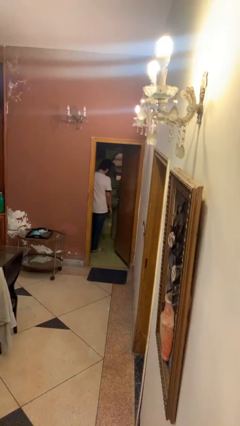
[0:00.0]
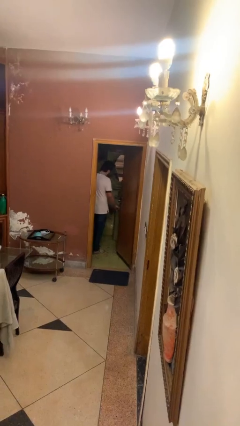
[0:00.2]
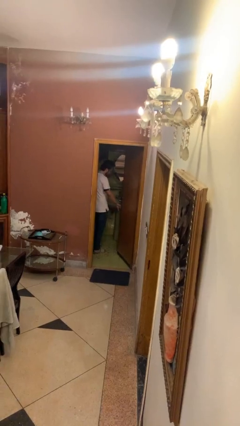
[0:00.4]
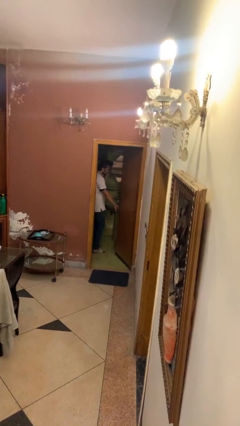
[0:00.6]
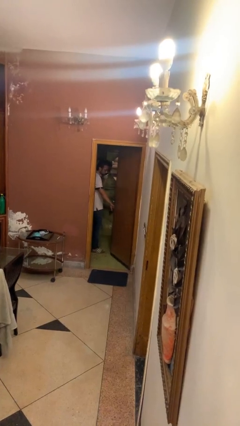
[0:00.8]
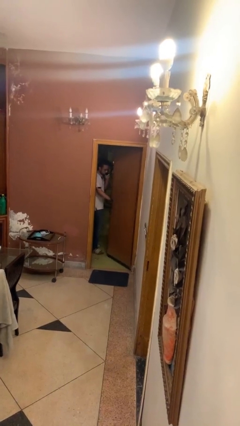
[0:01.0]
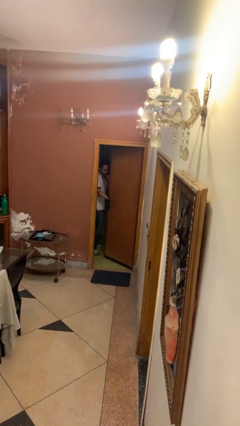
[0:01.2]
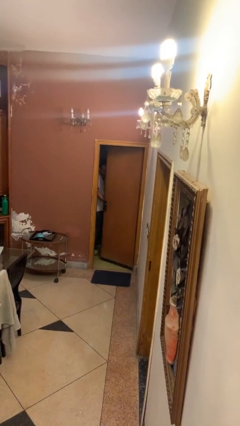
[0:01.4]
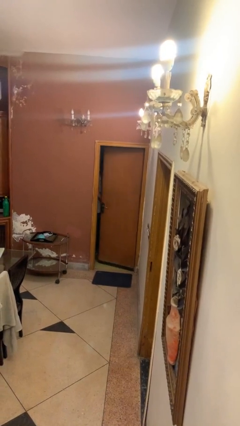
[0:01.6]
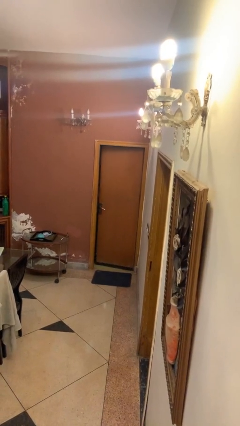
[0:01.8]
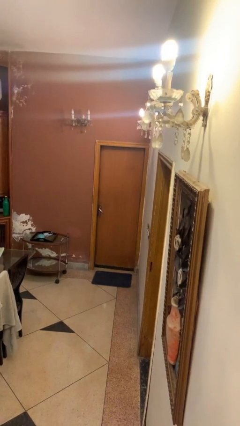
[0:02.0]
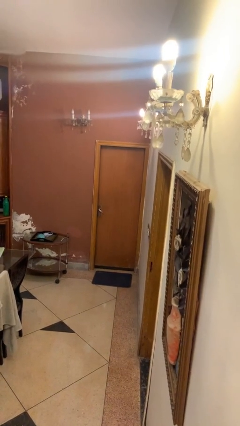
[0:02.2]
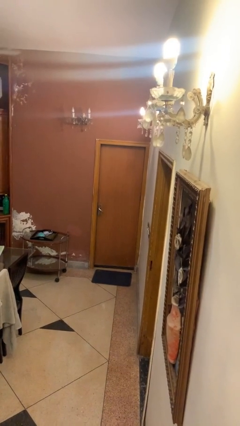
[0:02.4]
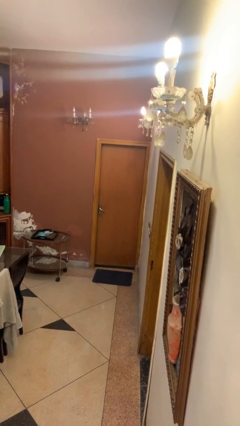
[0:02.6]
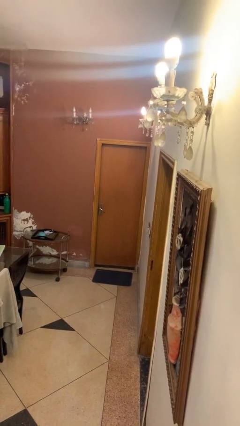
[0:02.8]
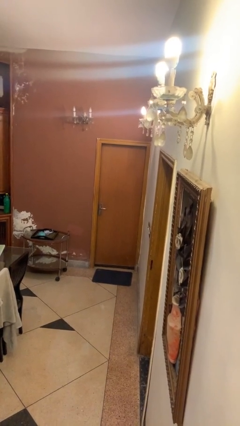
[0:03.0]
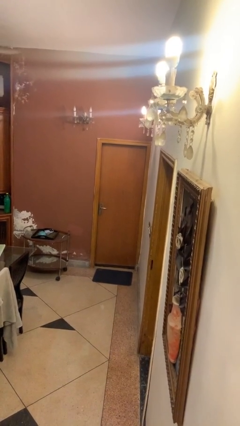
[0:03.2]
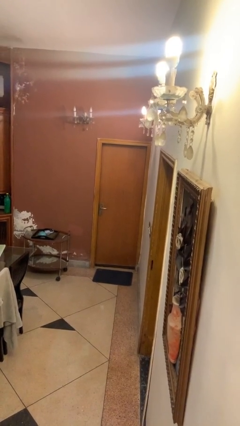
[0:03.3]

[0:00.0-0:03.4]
person closes facility door

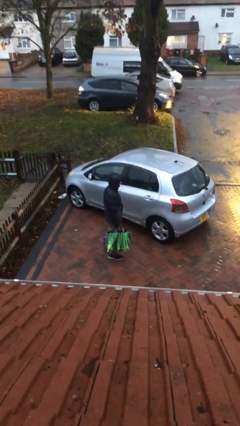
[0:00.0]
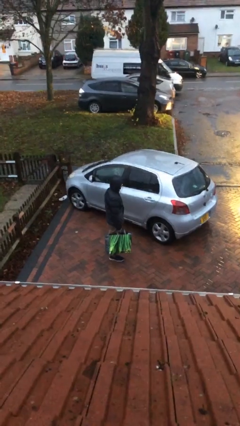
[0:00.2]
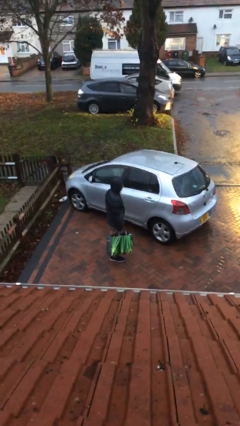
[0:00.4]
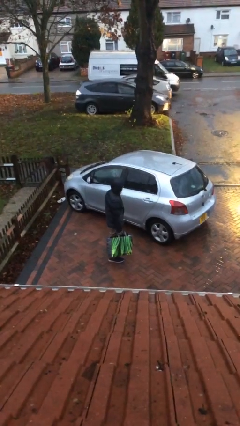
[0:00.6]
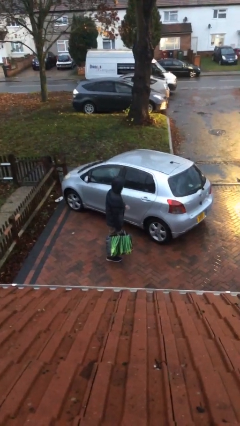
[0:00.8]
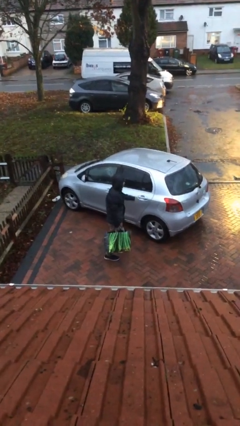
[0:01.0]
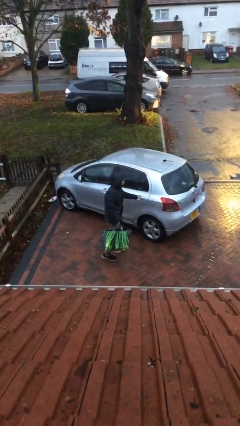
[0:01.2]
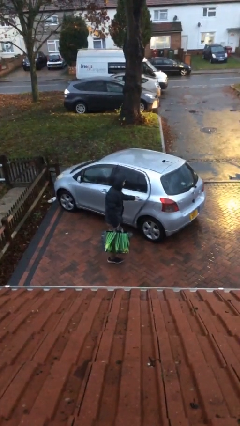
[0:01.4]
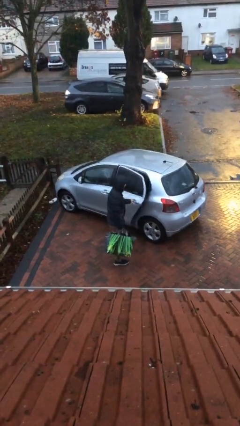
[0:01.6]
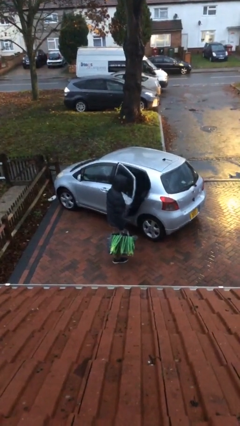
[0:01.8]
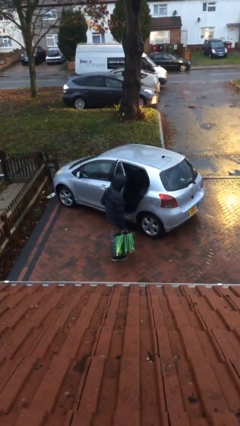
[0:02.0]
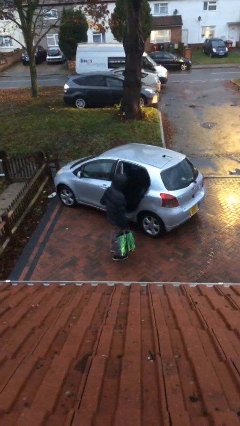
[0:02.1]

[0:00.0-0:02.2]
person opens car door

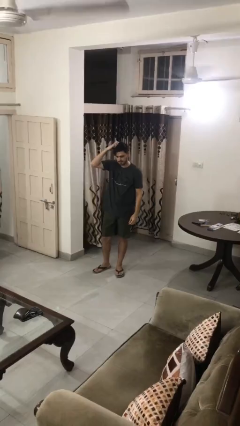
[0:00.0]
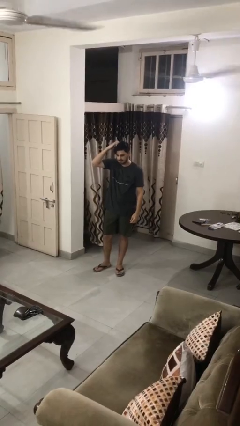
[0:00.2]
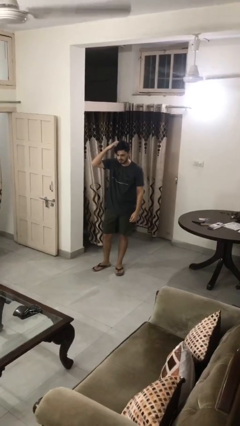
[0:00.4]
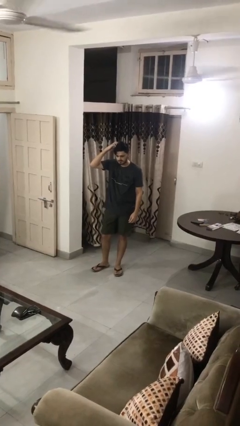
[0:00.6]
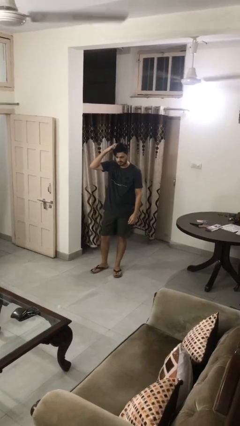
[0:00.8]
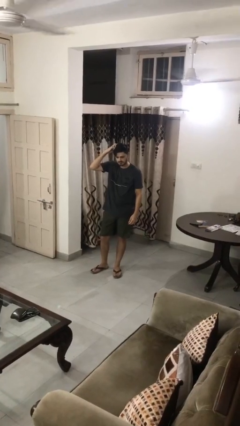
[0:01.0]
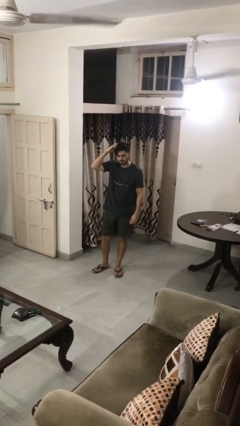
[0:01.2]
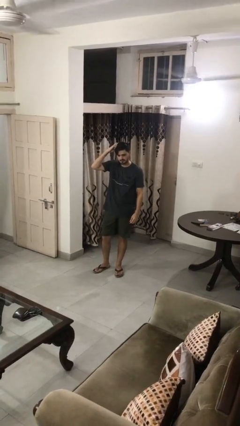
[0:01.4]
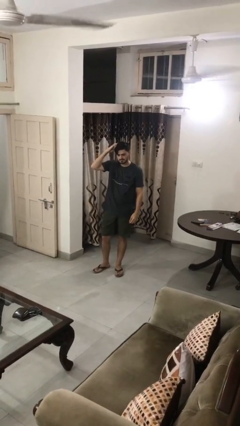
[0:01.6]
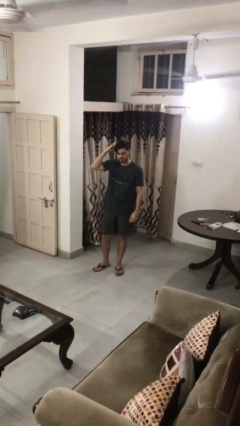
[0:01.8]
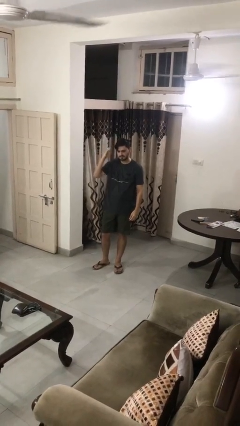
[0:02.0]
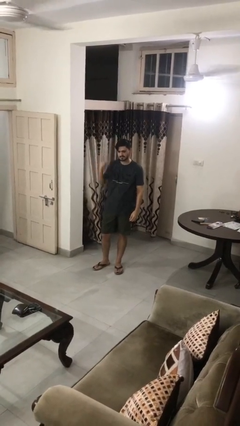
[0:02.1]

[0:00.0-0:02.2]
person scratches face

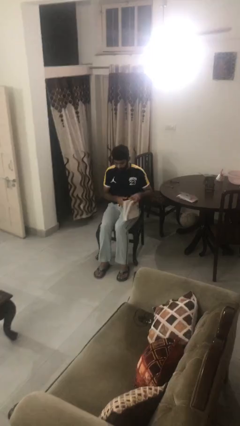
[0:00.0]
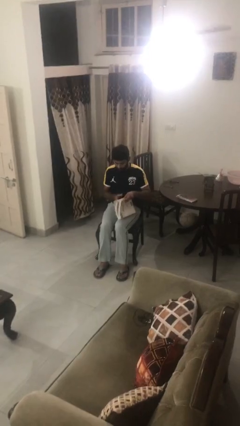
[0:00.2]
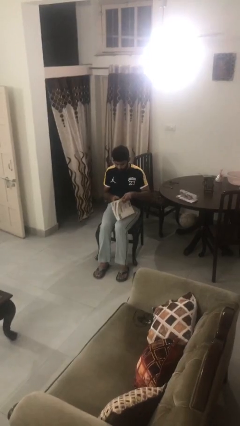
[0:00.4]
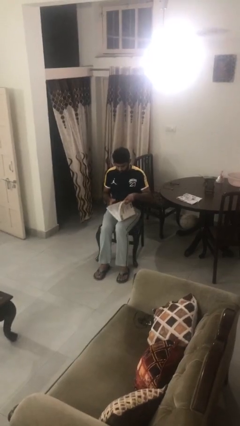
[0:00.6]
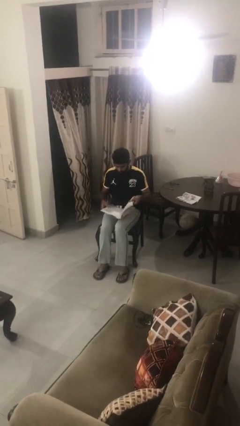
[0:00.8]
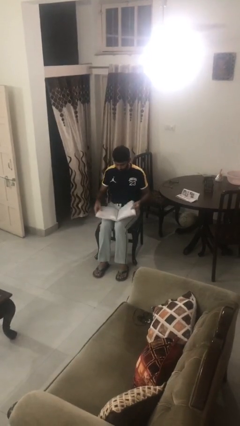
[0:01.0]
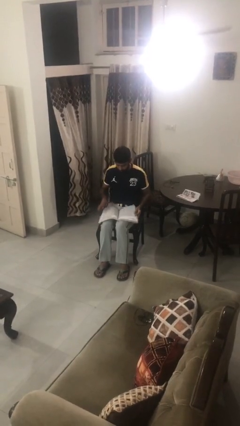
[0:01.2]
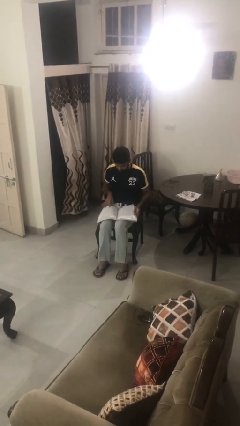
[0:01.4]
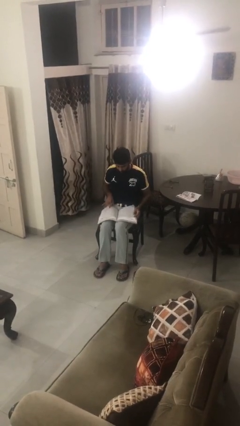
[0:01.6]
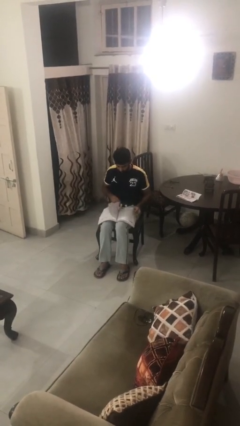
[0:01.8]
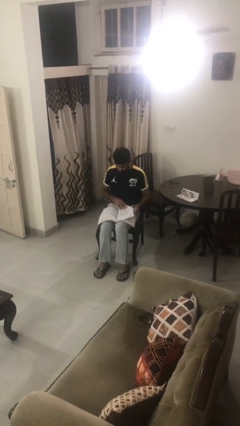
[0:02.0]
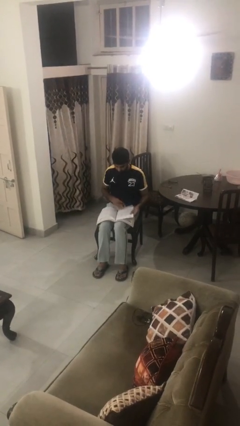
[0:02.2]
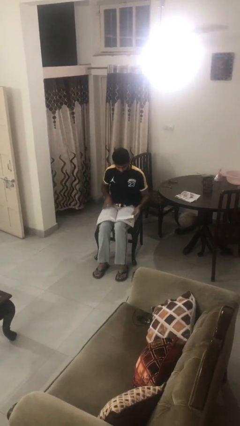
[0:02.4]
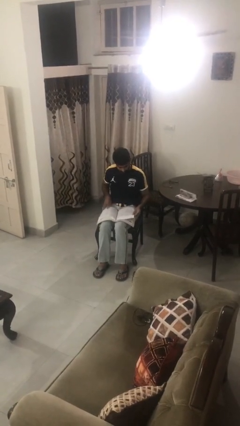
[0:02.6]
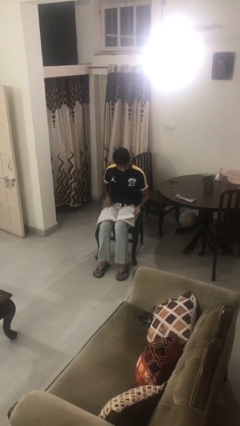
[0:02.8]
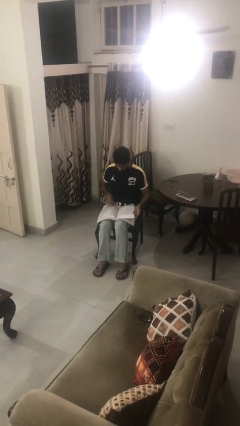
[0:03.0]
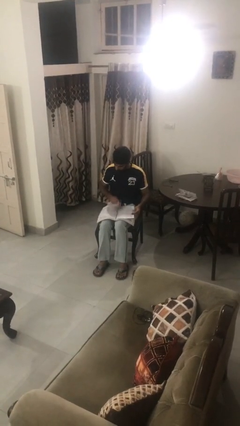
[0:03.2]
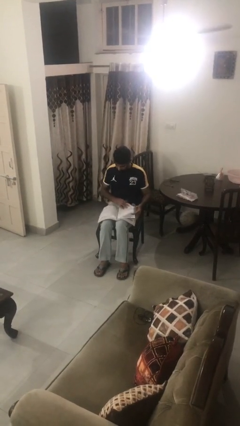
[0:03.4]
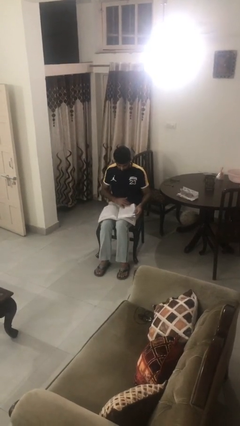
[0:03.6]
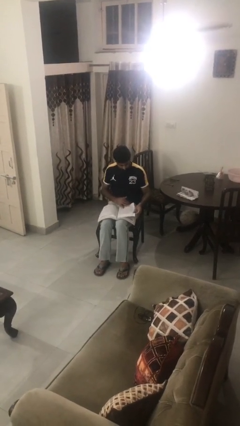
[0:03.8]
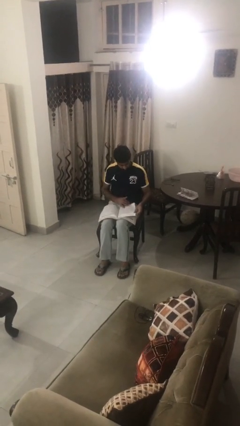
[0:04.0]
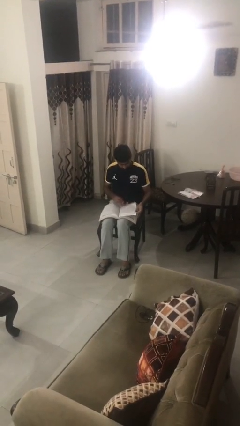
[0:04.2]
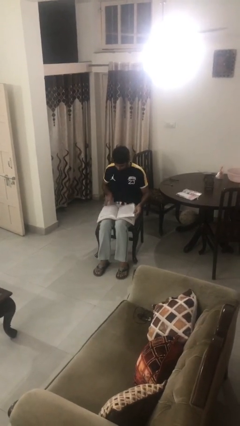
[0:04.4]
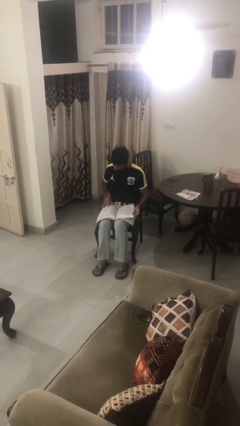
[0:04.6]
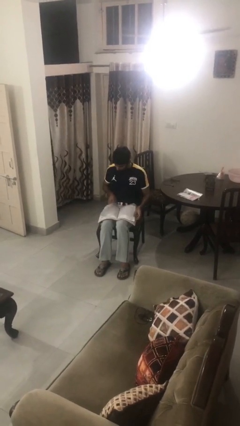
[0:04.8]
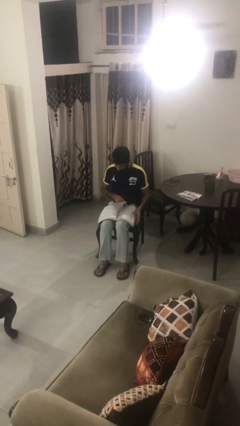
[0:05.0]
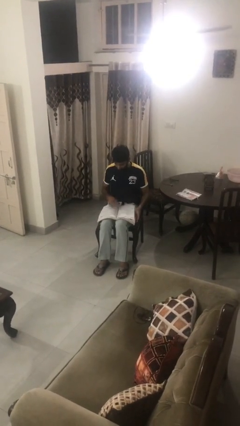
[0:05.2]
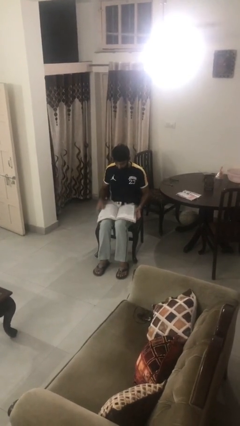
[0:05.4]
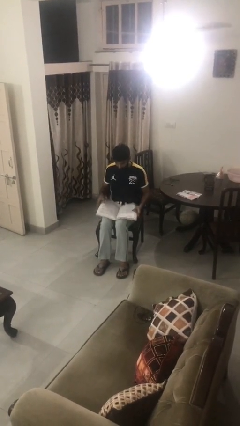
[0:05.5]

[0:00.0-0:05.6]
person reads book

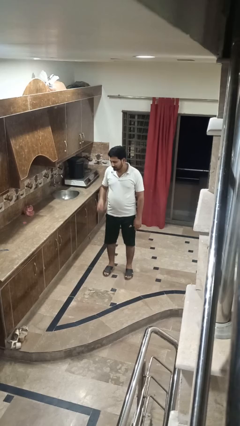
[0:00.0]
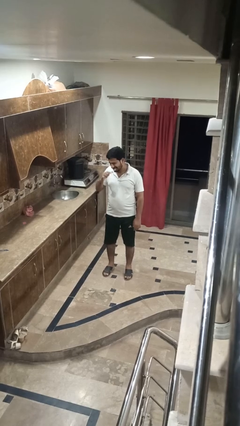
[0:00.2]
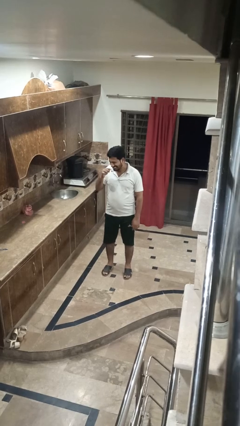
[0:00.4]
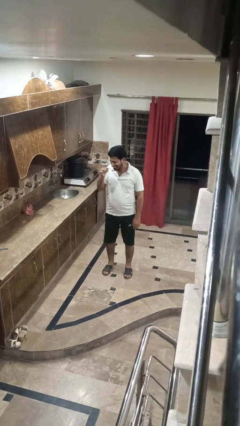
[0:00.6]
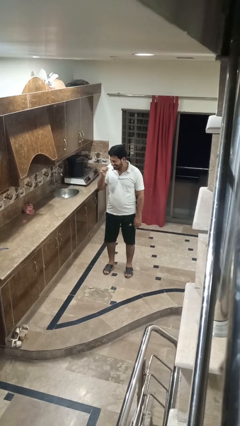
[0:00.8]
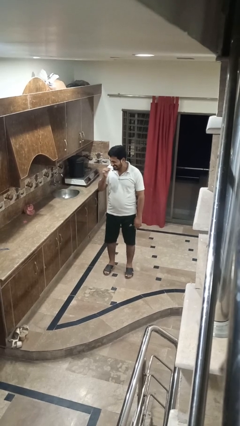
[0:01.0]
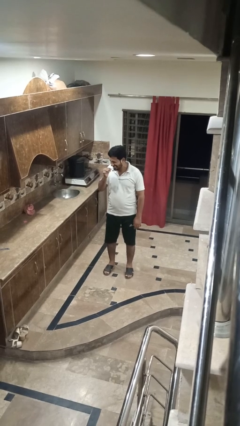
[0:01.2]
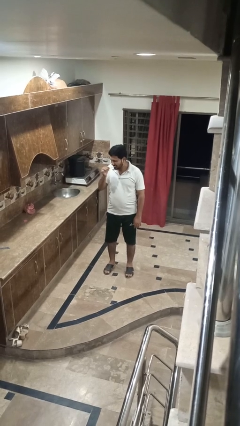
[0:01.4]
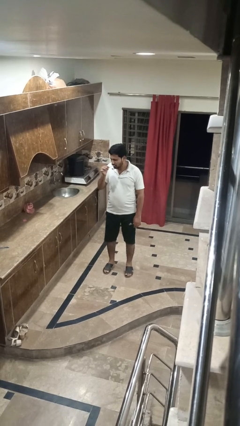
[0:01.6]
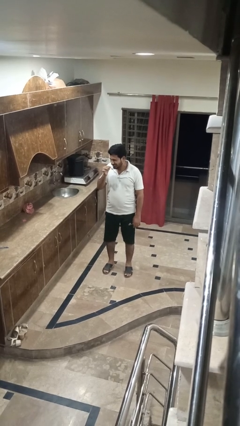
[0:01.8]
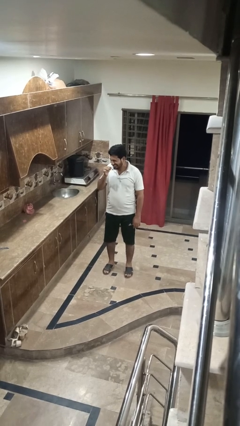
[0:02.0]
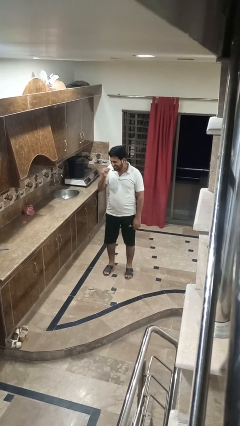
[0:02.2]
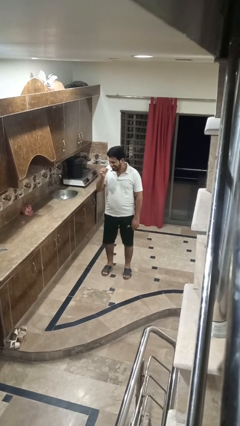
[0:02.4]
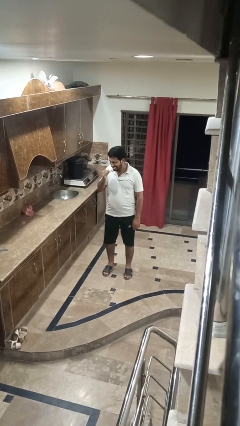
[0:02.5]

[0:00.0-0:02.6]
person brushes teeth

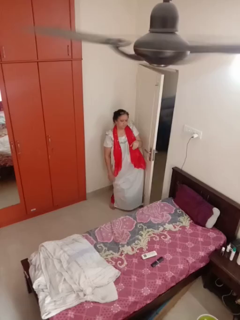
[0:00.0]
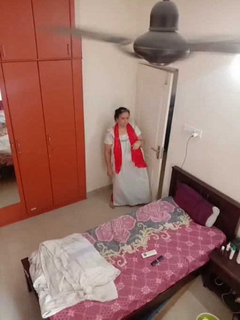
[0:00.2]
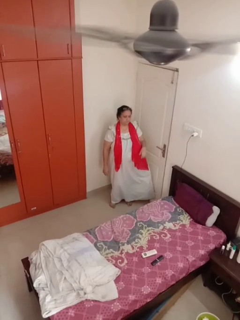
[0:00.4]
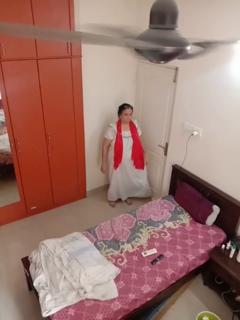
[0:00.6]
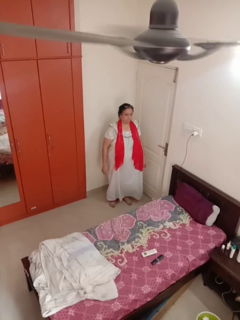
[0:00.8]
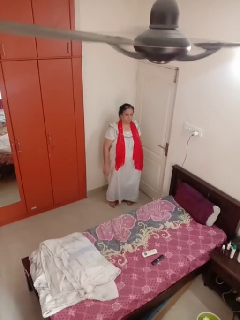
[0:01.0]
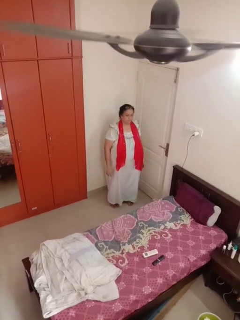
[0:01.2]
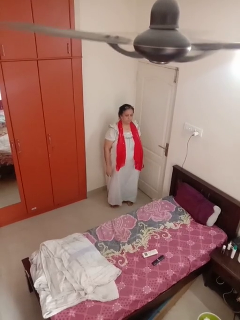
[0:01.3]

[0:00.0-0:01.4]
person closes door with hip
